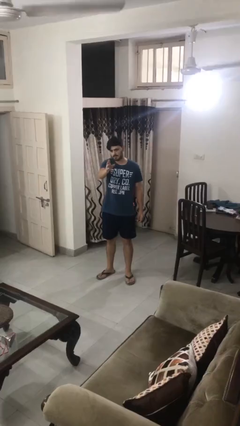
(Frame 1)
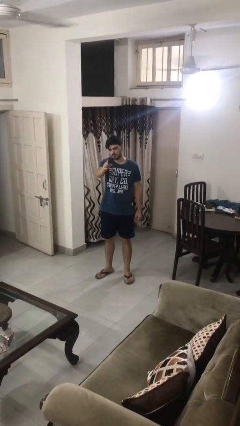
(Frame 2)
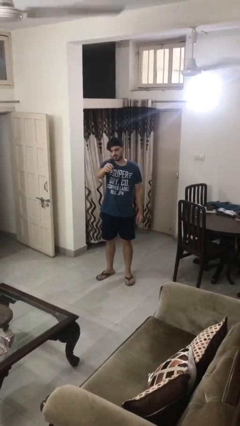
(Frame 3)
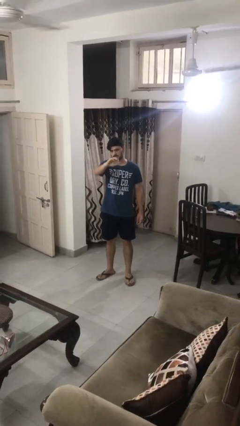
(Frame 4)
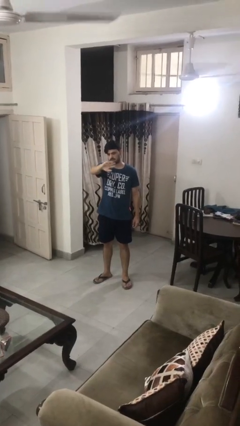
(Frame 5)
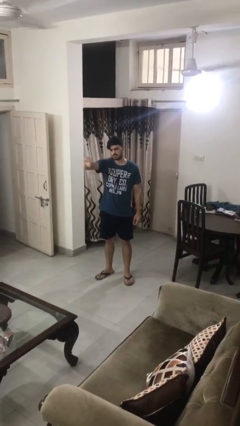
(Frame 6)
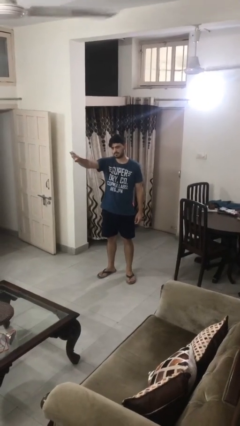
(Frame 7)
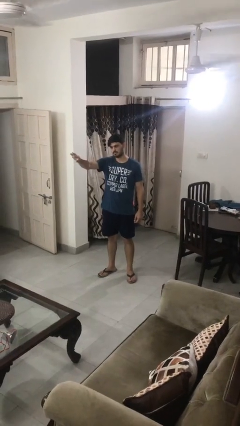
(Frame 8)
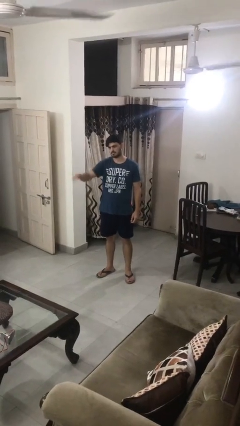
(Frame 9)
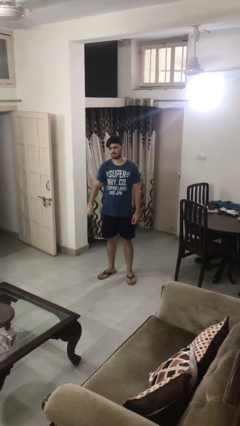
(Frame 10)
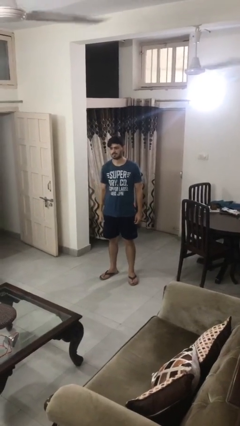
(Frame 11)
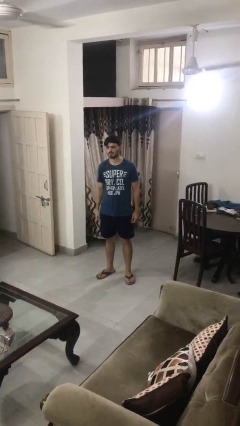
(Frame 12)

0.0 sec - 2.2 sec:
person gestures swipe right

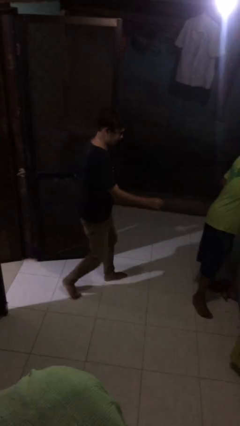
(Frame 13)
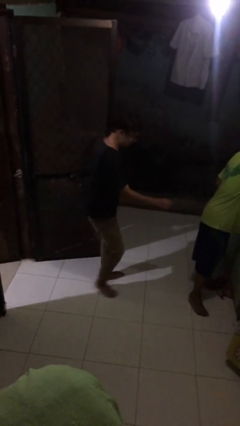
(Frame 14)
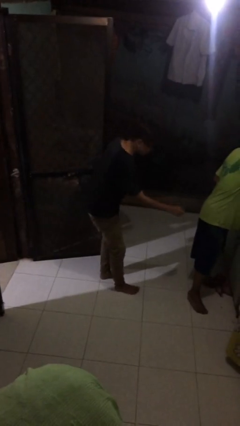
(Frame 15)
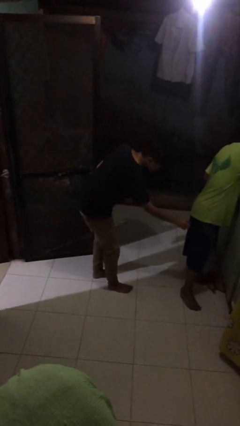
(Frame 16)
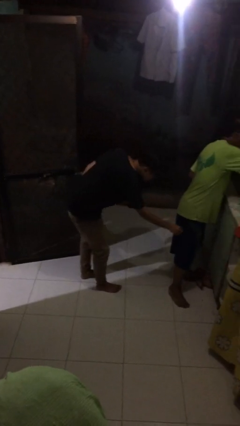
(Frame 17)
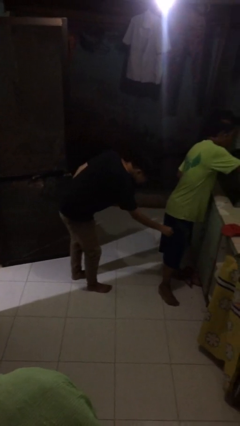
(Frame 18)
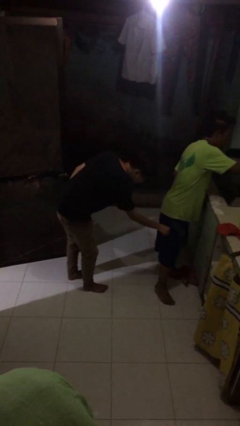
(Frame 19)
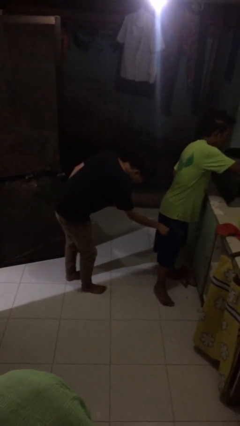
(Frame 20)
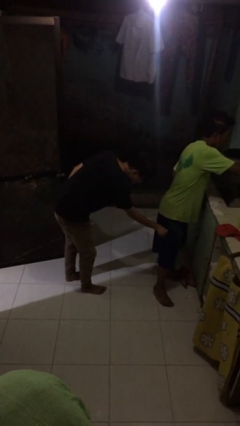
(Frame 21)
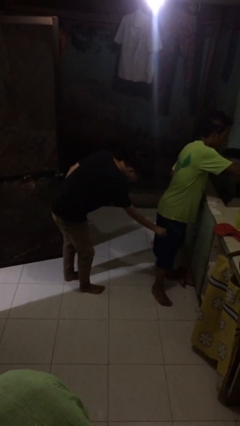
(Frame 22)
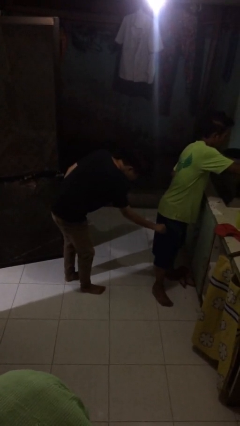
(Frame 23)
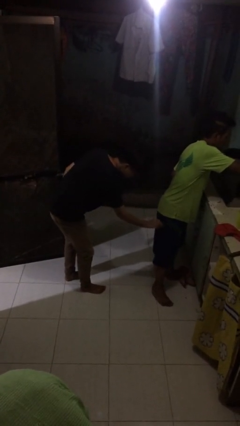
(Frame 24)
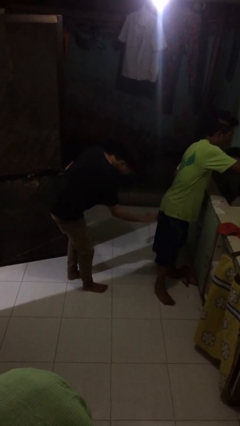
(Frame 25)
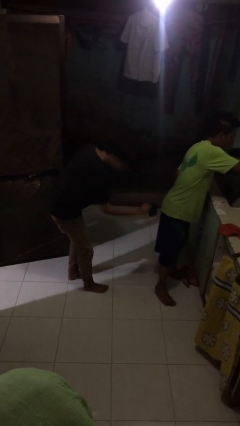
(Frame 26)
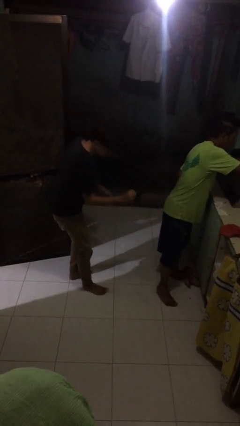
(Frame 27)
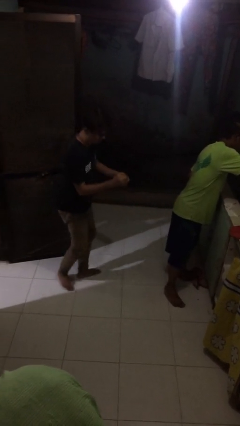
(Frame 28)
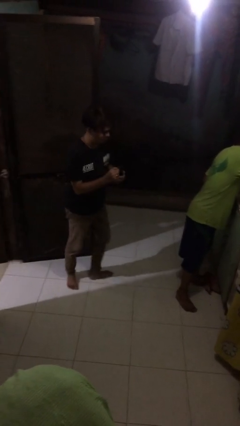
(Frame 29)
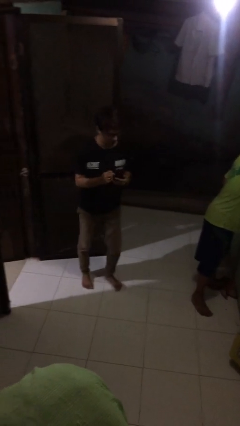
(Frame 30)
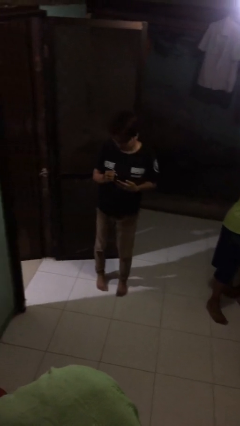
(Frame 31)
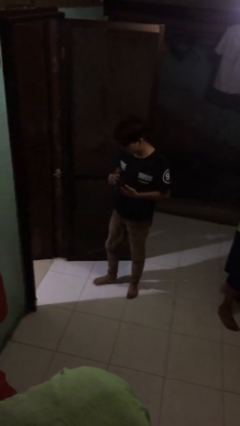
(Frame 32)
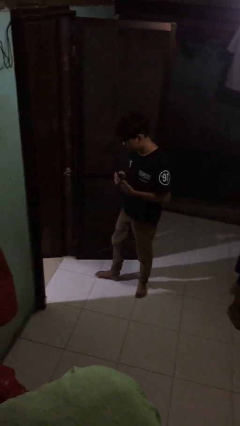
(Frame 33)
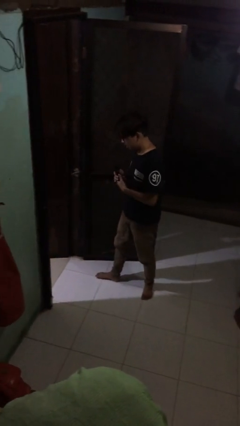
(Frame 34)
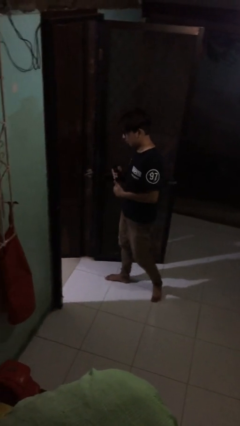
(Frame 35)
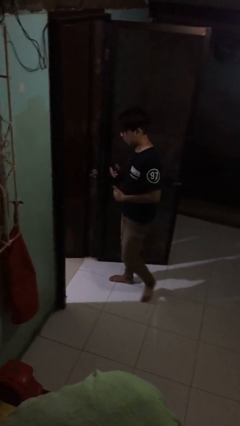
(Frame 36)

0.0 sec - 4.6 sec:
person steals object from person

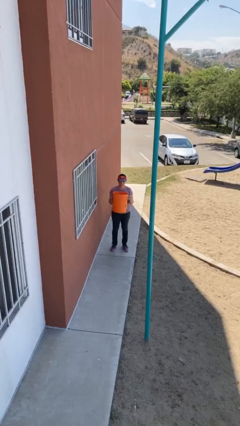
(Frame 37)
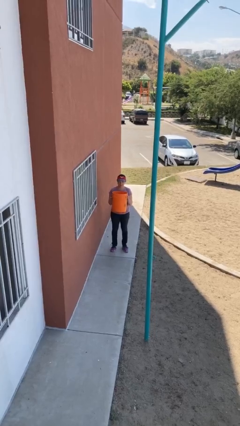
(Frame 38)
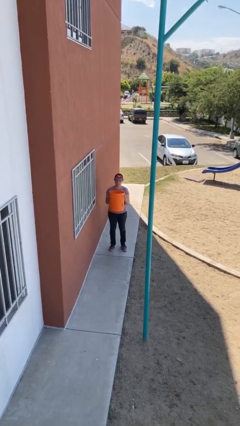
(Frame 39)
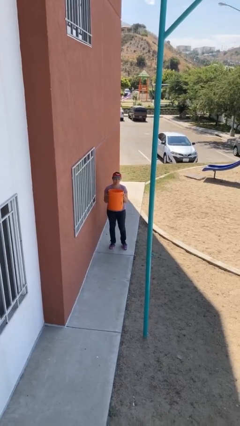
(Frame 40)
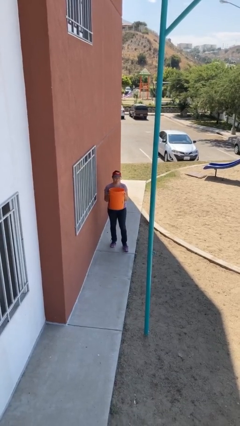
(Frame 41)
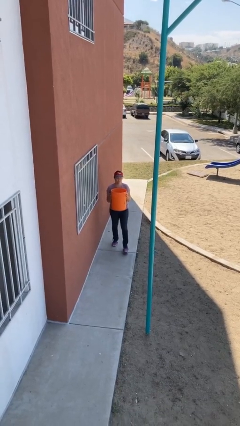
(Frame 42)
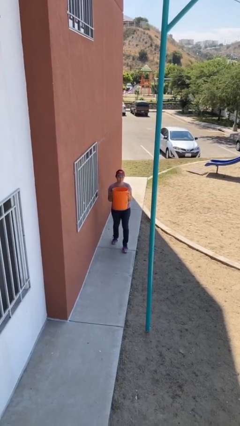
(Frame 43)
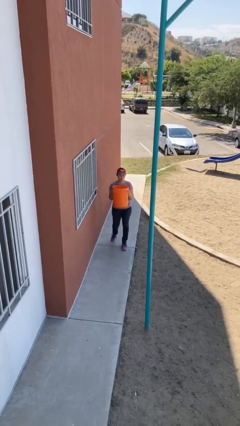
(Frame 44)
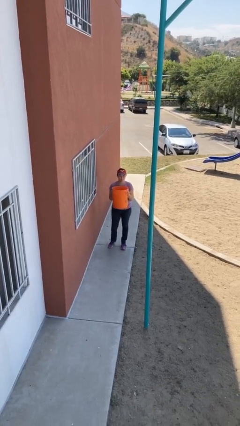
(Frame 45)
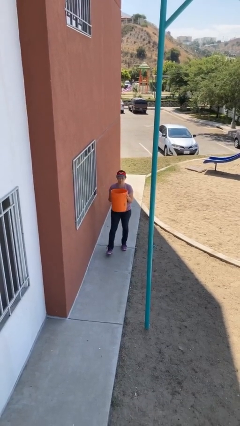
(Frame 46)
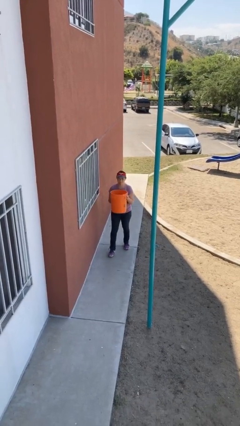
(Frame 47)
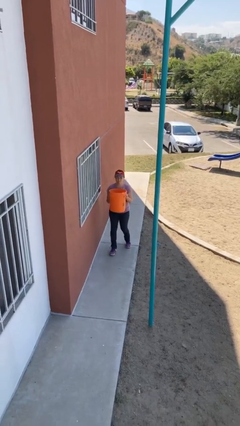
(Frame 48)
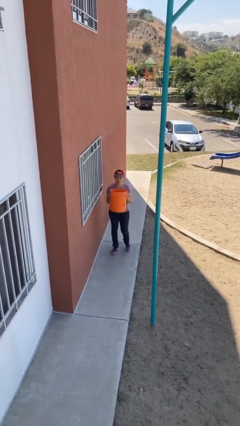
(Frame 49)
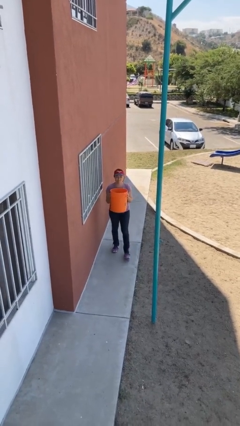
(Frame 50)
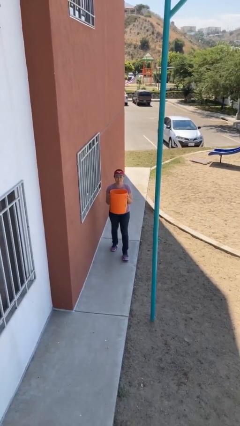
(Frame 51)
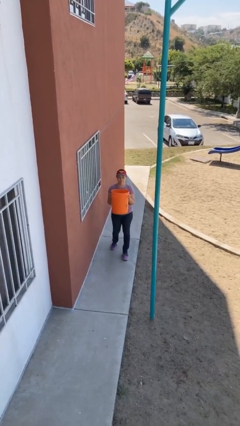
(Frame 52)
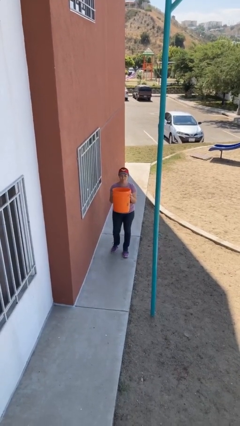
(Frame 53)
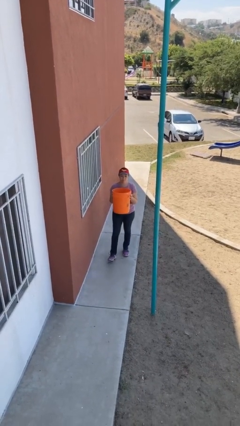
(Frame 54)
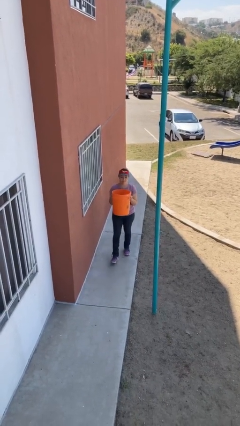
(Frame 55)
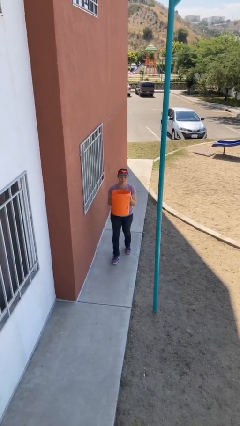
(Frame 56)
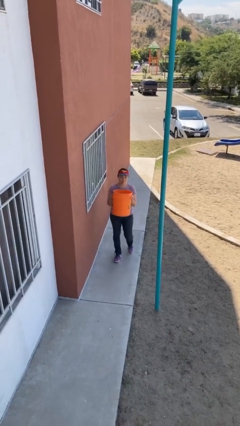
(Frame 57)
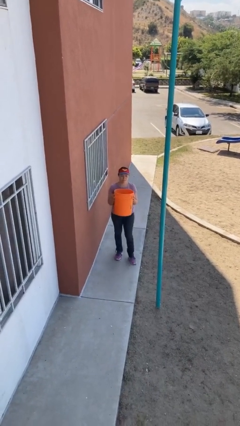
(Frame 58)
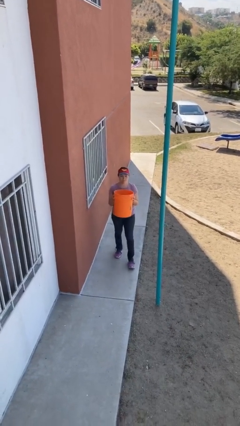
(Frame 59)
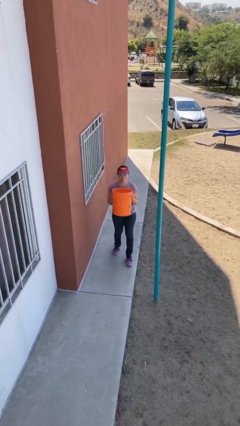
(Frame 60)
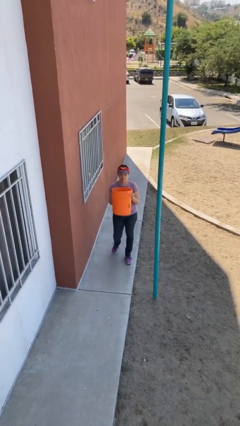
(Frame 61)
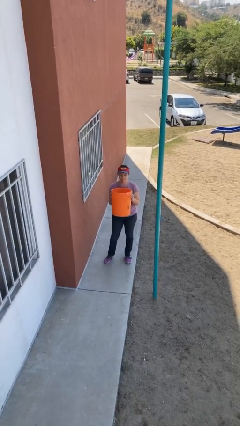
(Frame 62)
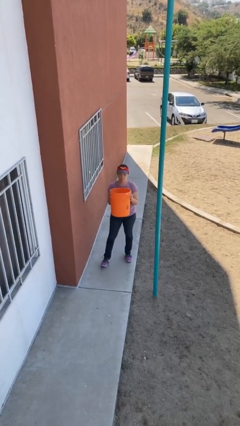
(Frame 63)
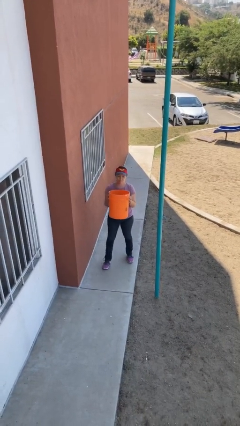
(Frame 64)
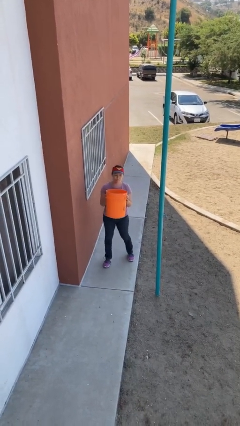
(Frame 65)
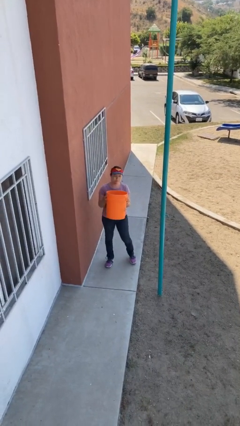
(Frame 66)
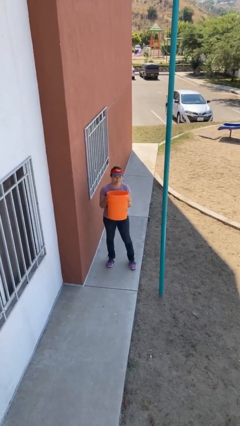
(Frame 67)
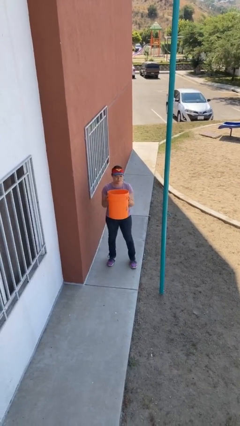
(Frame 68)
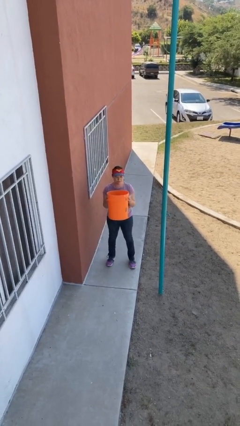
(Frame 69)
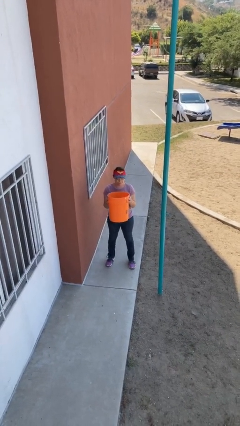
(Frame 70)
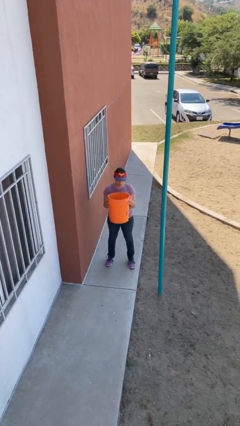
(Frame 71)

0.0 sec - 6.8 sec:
person carries heavy object

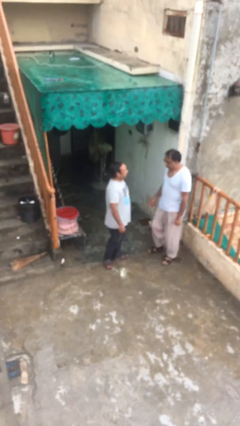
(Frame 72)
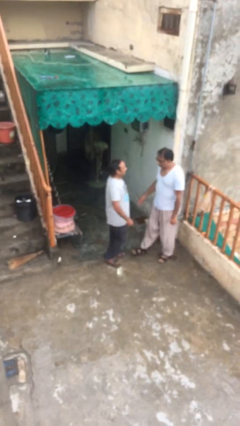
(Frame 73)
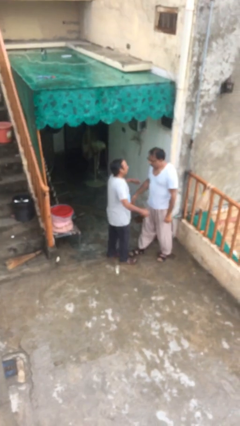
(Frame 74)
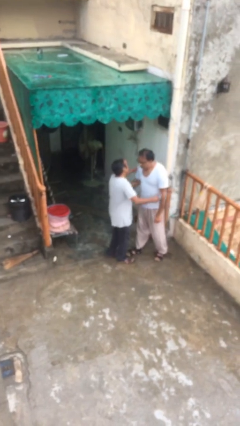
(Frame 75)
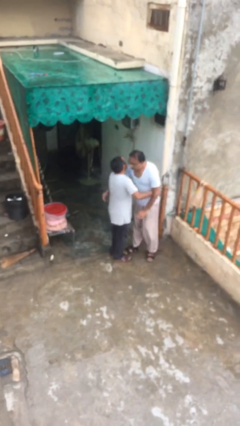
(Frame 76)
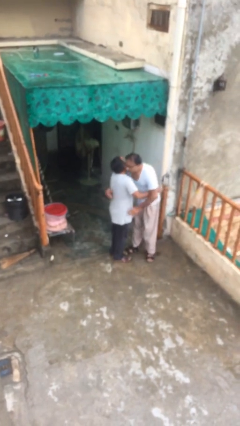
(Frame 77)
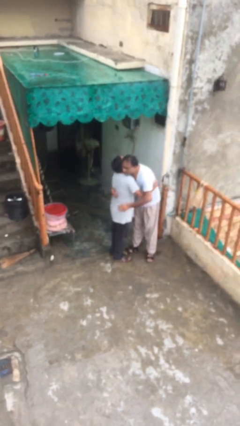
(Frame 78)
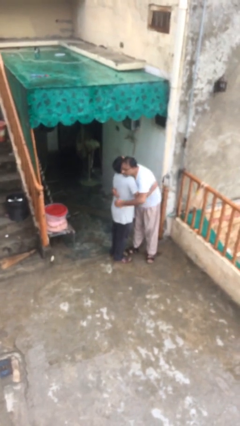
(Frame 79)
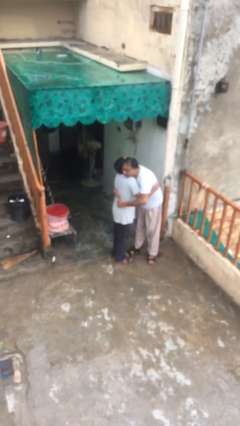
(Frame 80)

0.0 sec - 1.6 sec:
person embraces person

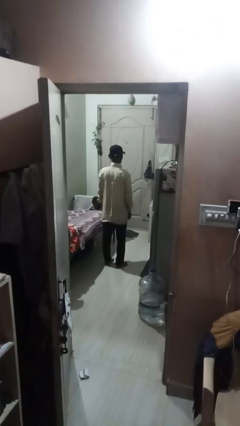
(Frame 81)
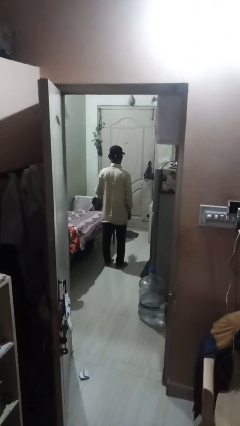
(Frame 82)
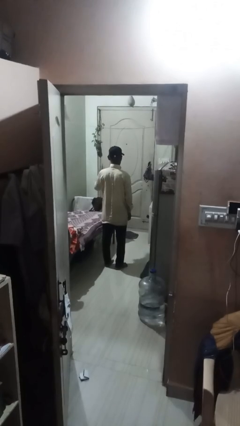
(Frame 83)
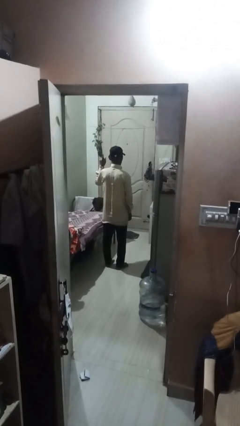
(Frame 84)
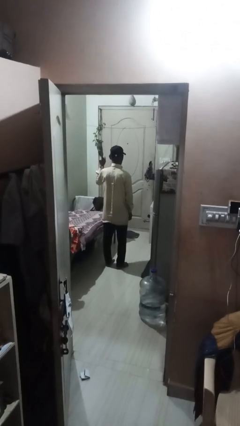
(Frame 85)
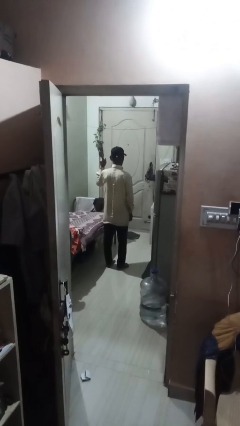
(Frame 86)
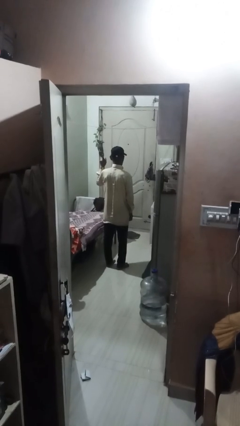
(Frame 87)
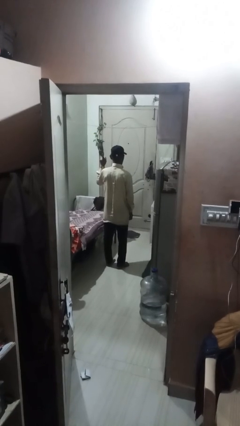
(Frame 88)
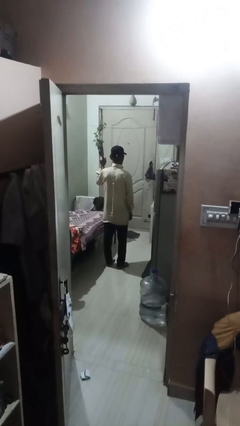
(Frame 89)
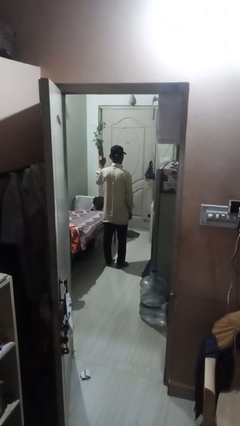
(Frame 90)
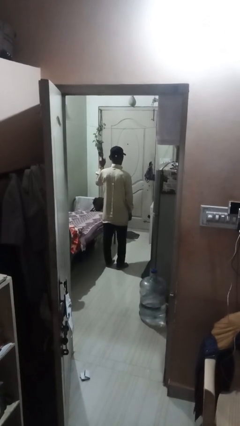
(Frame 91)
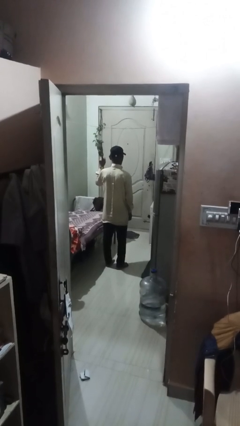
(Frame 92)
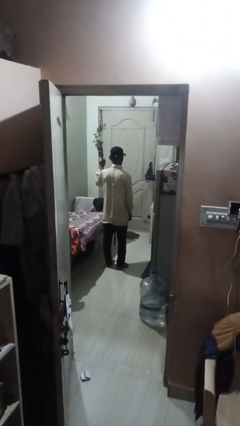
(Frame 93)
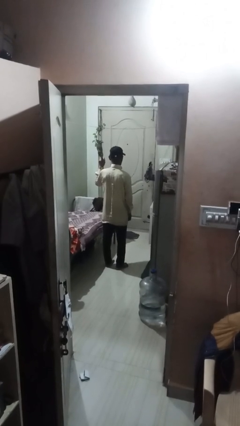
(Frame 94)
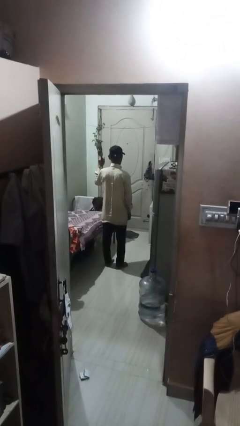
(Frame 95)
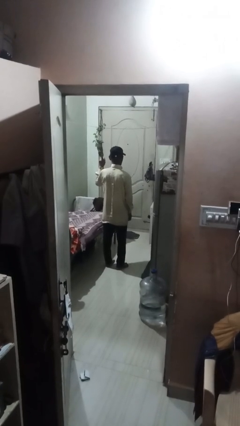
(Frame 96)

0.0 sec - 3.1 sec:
person gestures number one
